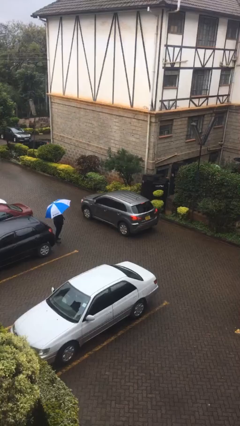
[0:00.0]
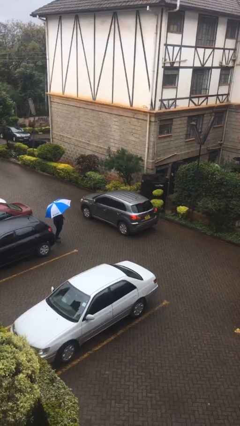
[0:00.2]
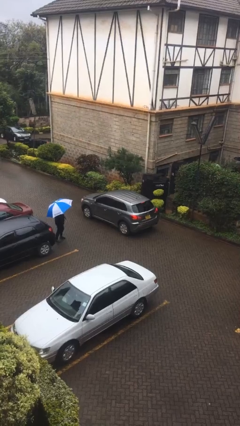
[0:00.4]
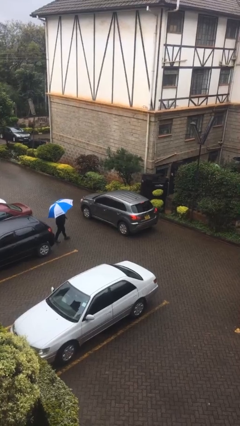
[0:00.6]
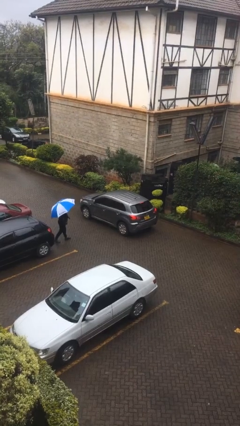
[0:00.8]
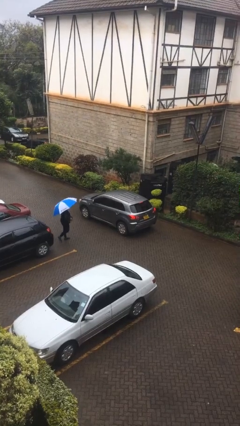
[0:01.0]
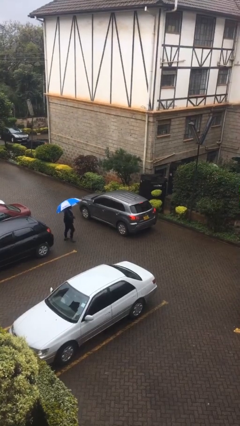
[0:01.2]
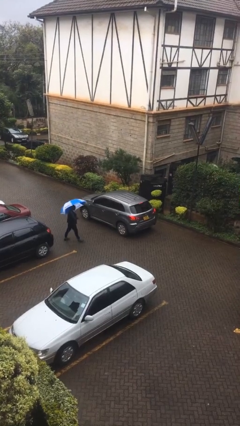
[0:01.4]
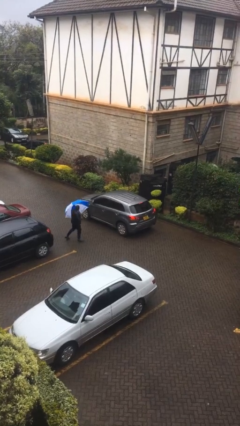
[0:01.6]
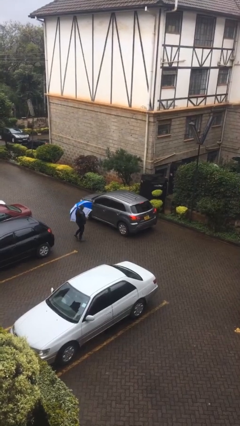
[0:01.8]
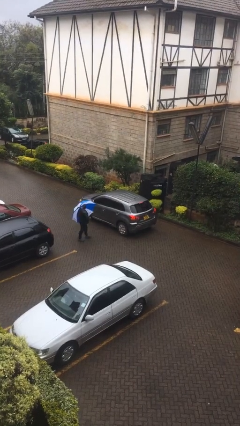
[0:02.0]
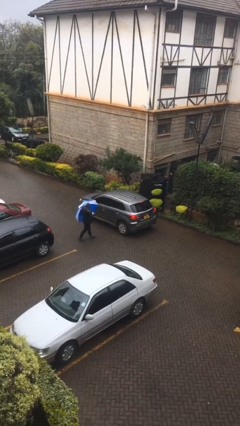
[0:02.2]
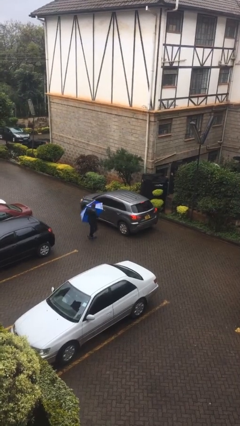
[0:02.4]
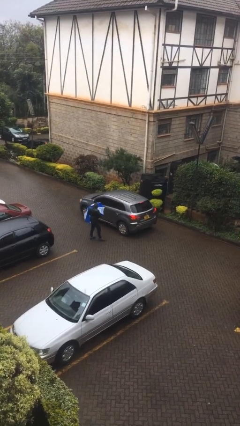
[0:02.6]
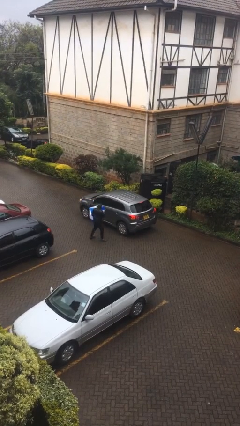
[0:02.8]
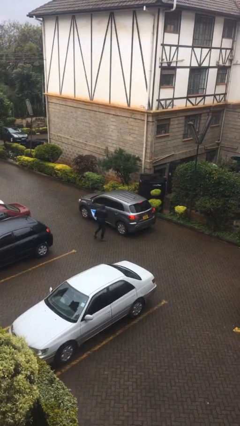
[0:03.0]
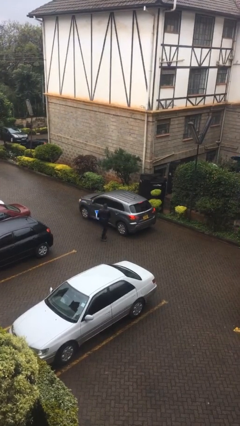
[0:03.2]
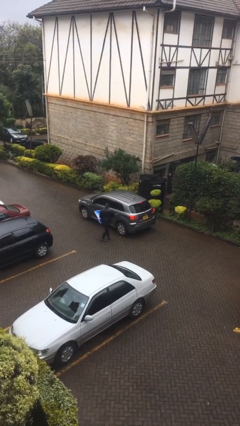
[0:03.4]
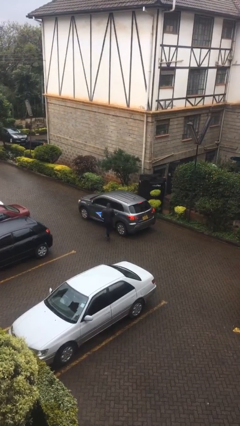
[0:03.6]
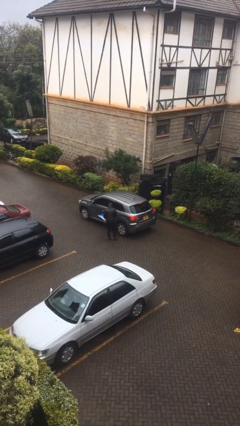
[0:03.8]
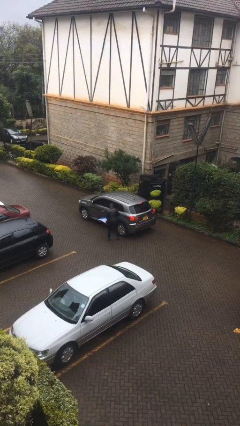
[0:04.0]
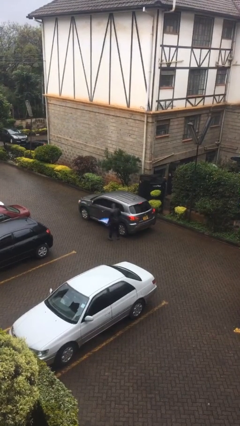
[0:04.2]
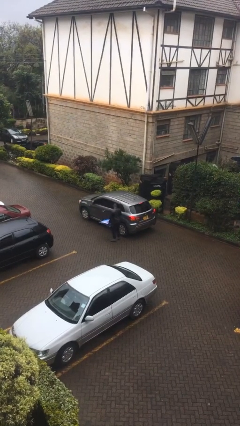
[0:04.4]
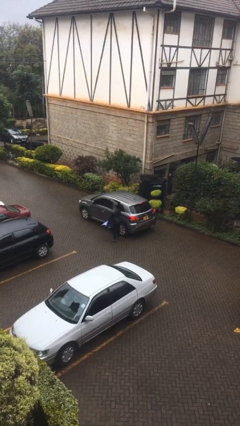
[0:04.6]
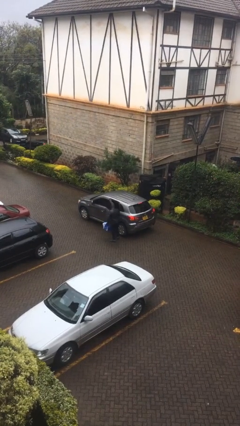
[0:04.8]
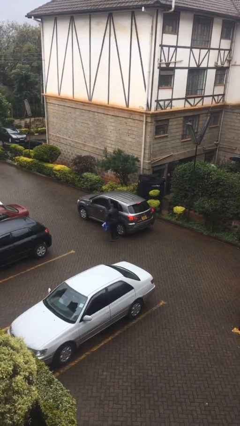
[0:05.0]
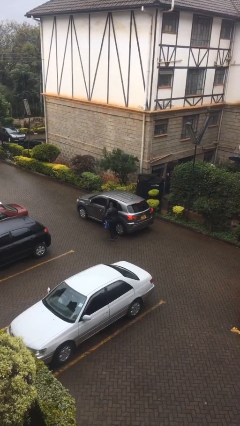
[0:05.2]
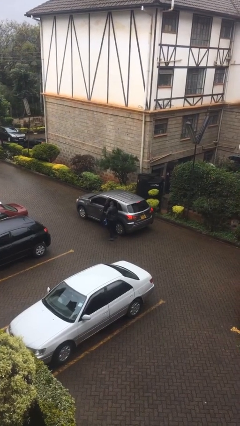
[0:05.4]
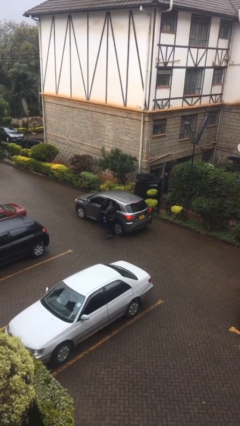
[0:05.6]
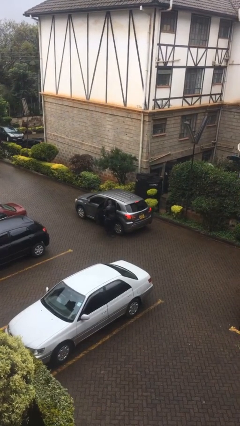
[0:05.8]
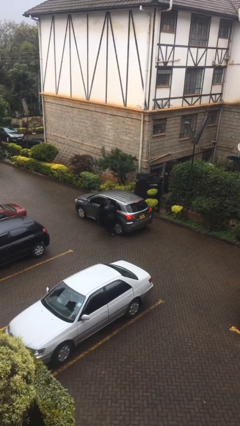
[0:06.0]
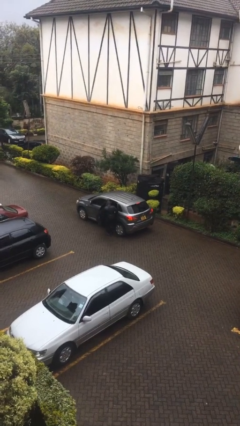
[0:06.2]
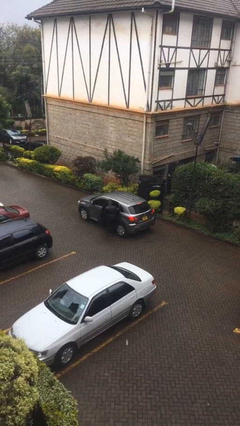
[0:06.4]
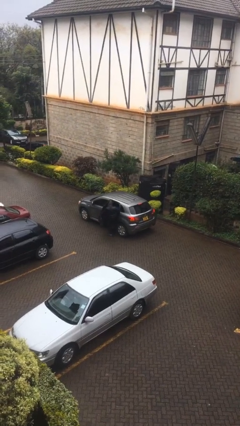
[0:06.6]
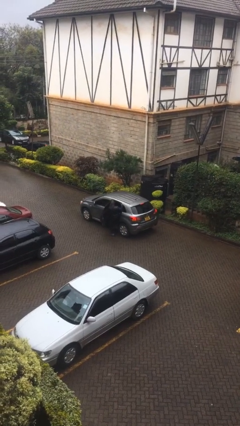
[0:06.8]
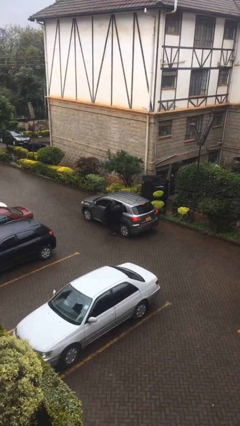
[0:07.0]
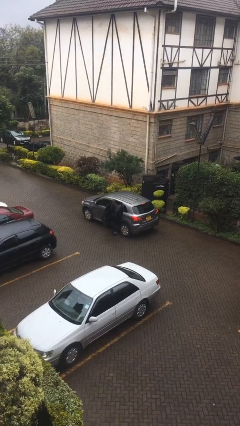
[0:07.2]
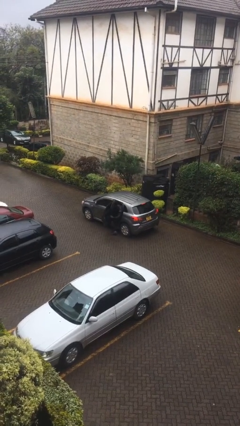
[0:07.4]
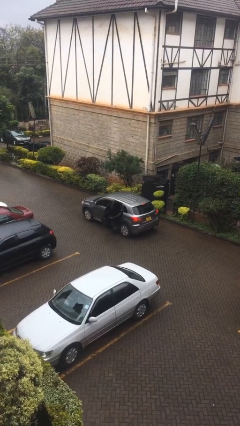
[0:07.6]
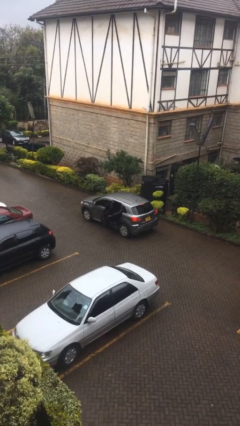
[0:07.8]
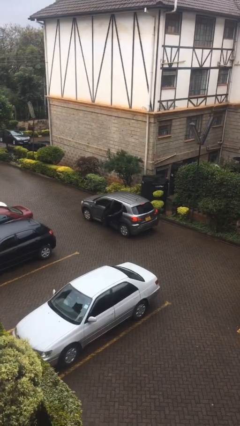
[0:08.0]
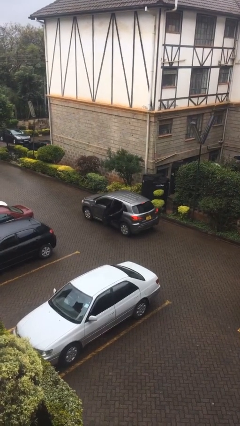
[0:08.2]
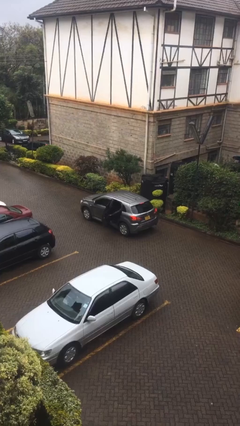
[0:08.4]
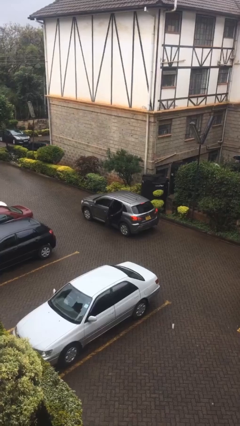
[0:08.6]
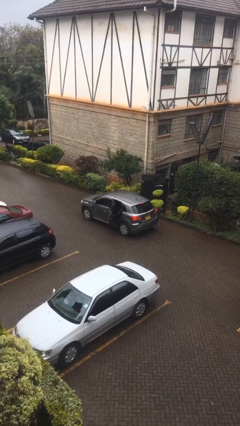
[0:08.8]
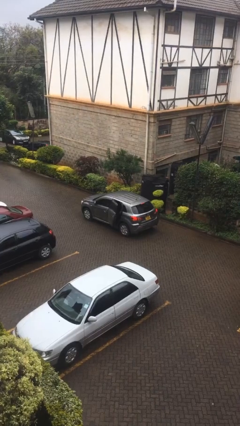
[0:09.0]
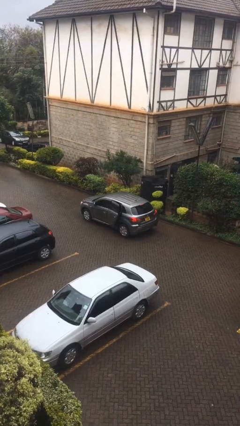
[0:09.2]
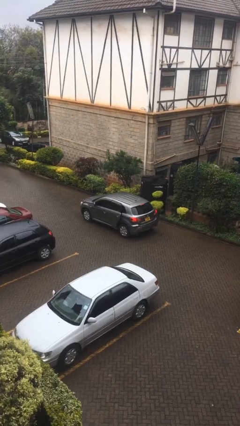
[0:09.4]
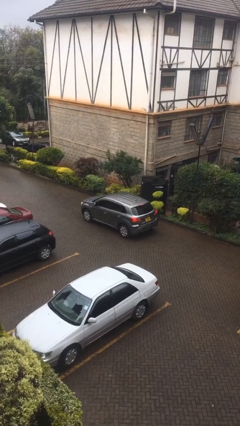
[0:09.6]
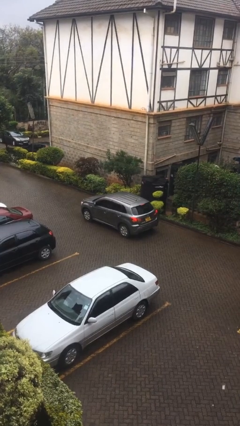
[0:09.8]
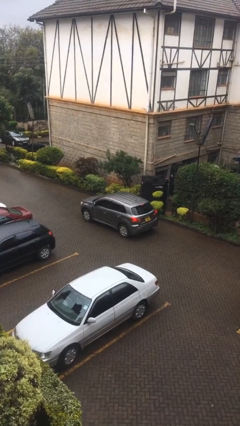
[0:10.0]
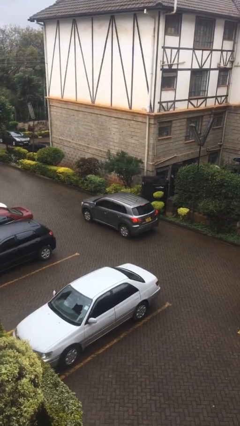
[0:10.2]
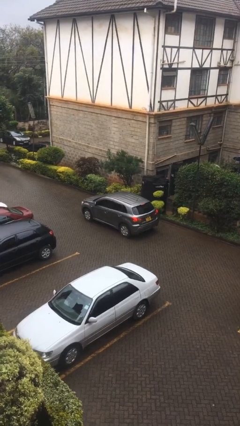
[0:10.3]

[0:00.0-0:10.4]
car picks up person

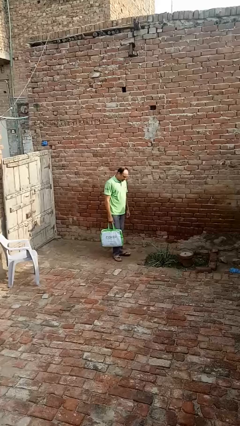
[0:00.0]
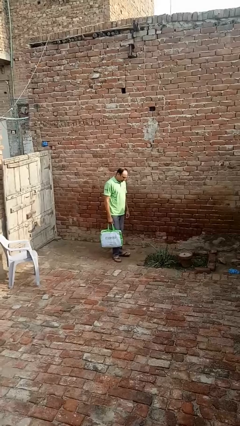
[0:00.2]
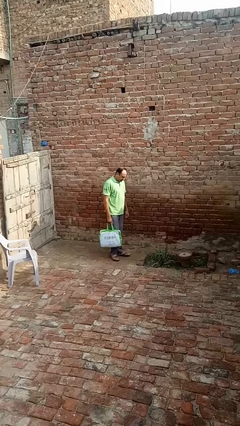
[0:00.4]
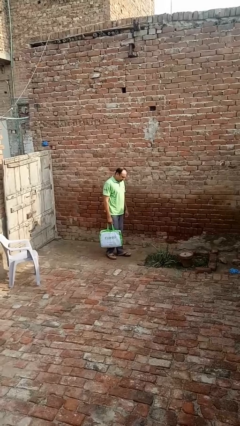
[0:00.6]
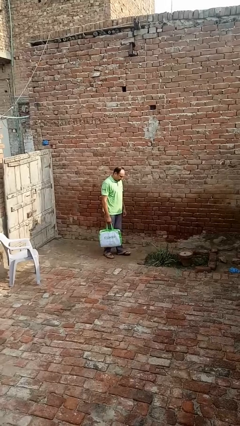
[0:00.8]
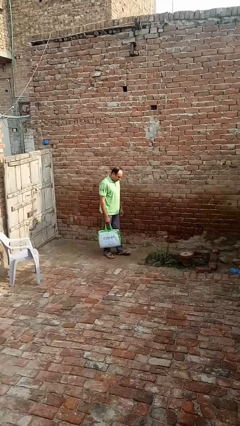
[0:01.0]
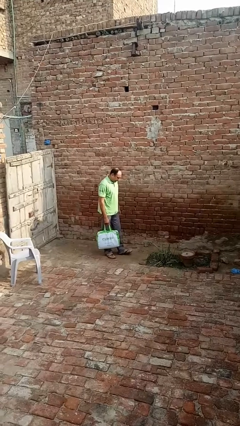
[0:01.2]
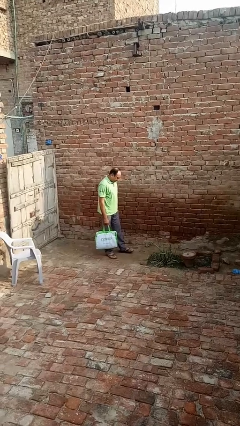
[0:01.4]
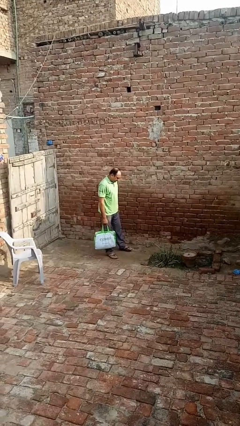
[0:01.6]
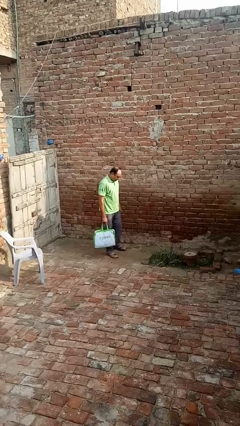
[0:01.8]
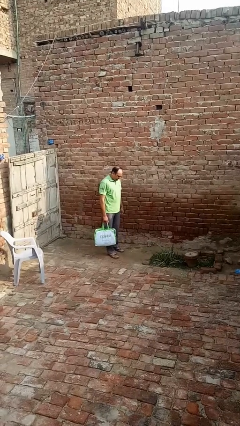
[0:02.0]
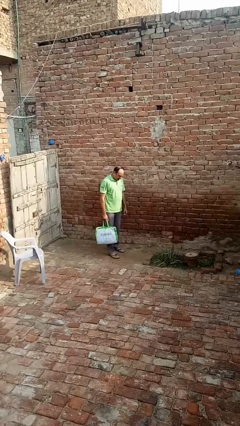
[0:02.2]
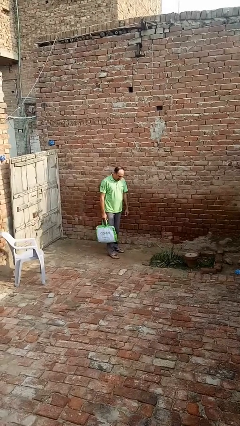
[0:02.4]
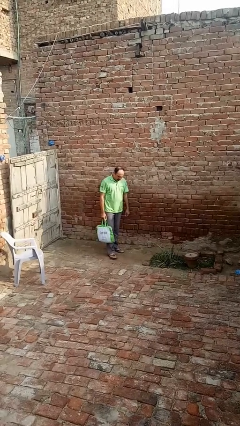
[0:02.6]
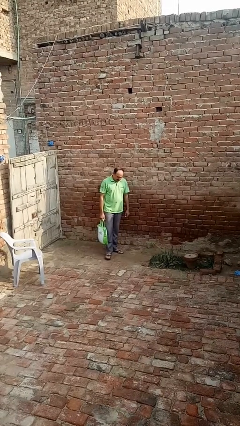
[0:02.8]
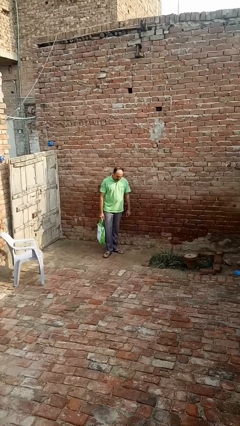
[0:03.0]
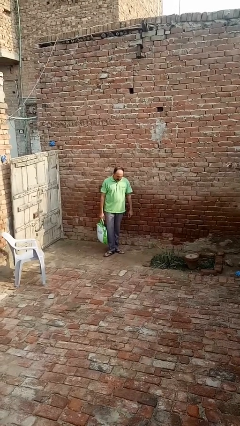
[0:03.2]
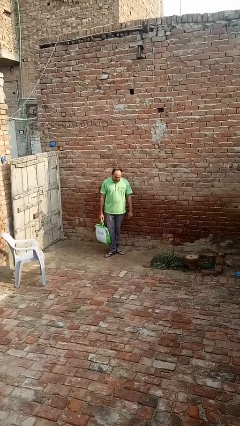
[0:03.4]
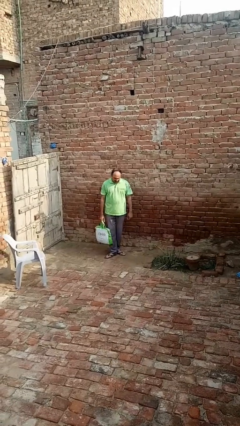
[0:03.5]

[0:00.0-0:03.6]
person carries groceries

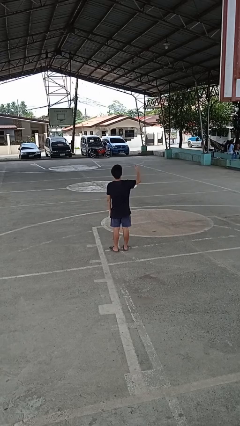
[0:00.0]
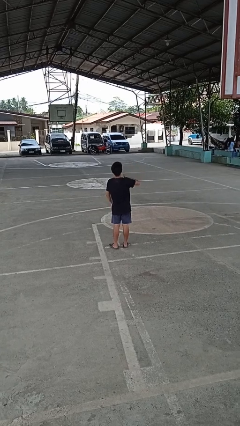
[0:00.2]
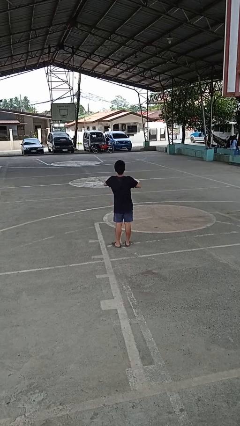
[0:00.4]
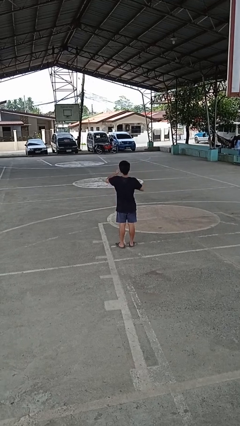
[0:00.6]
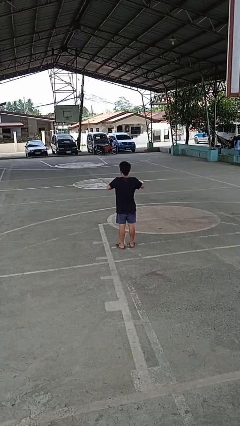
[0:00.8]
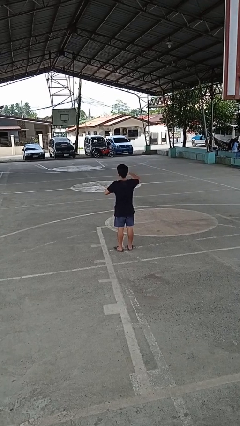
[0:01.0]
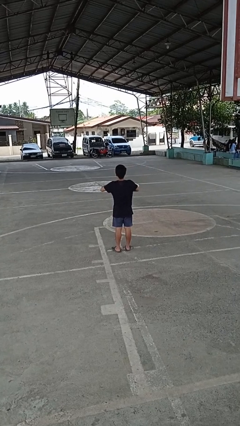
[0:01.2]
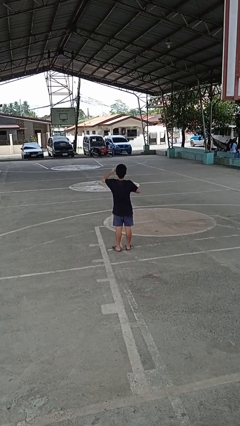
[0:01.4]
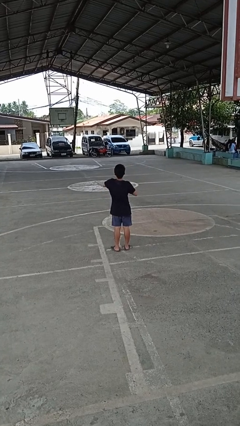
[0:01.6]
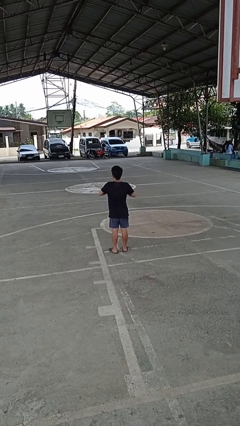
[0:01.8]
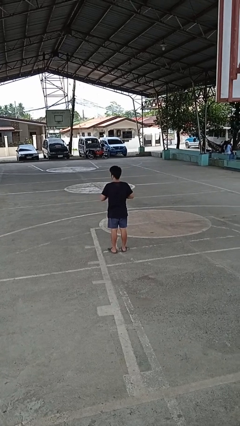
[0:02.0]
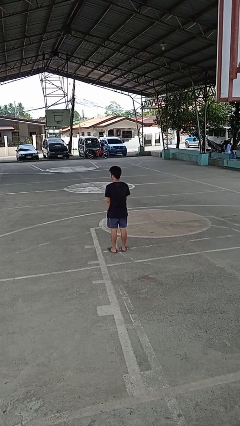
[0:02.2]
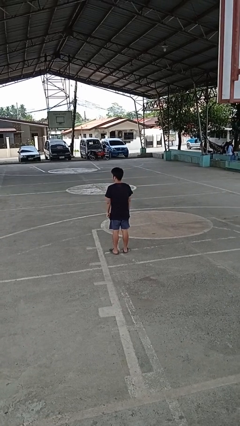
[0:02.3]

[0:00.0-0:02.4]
person drums on chest

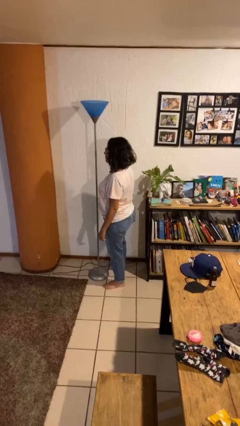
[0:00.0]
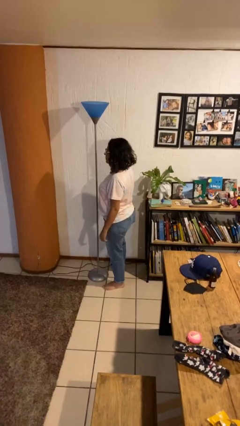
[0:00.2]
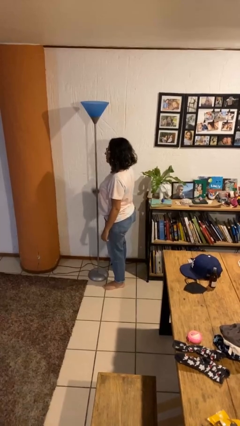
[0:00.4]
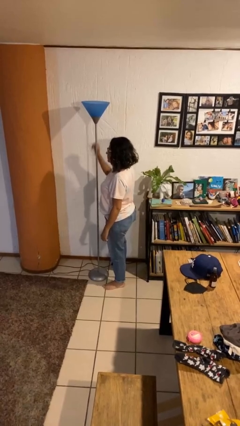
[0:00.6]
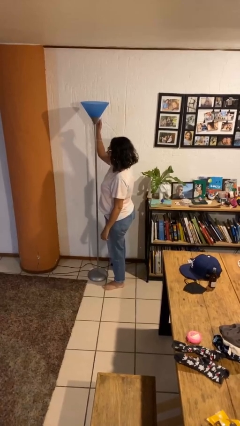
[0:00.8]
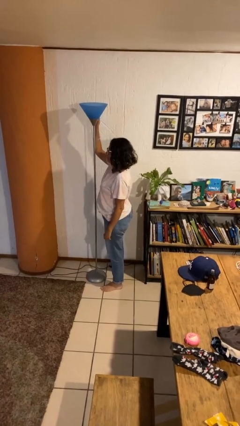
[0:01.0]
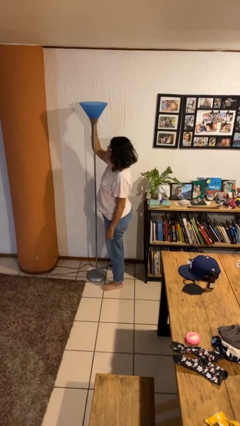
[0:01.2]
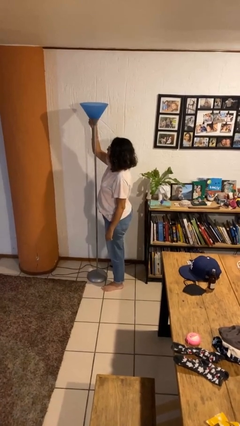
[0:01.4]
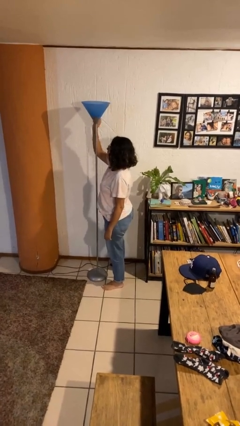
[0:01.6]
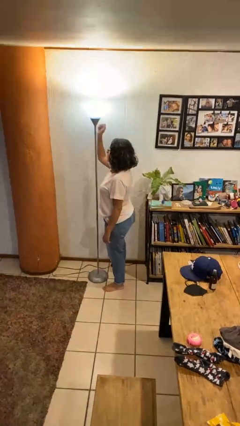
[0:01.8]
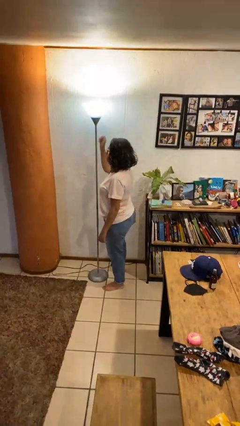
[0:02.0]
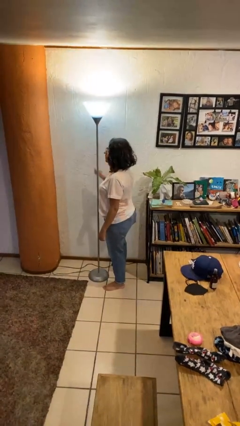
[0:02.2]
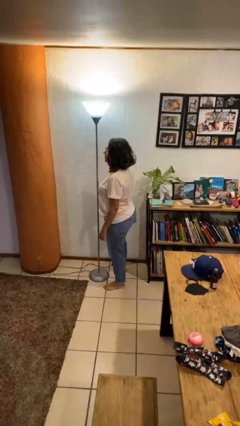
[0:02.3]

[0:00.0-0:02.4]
person turns on lamp
